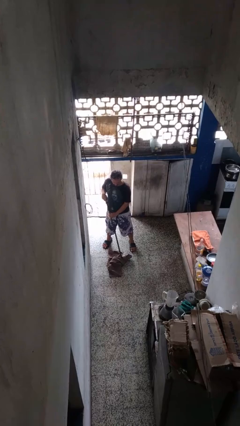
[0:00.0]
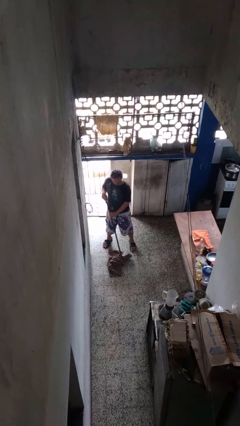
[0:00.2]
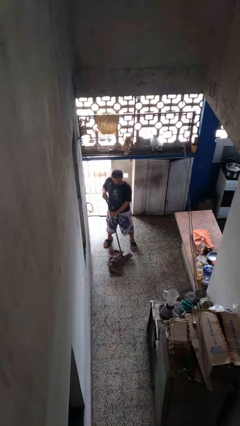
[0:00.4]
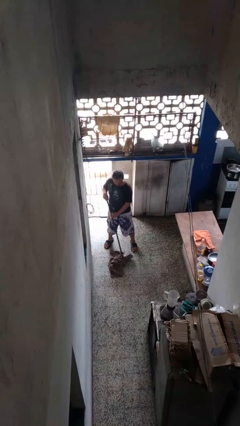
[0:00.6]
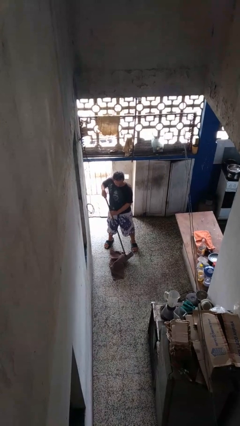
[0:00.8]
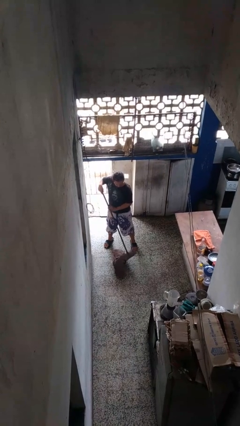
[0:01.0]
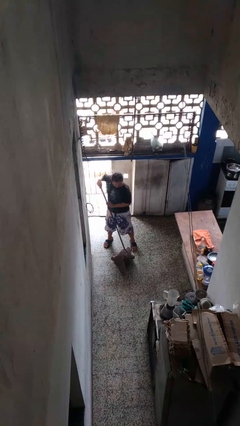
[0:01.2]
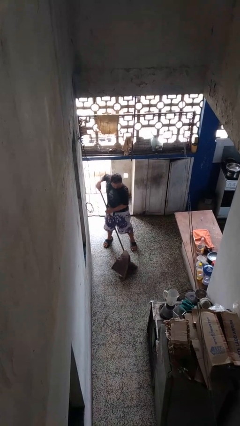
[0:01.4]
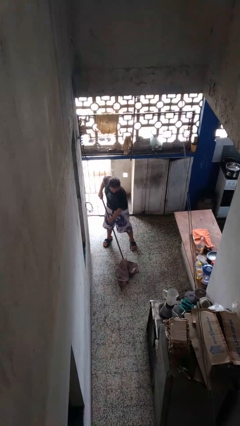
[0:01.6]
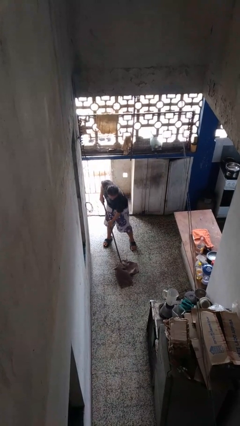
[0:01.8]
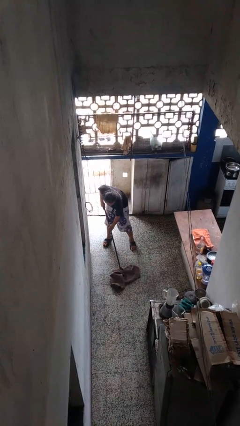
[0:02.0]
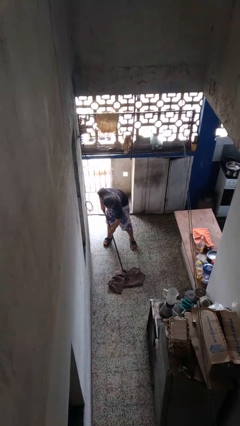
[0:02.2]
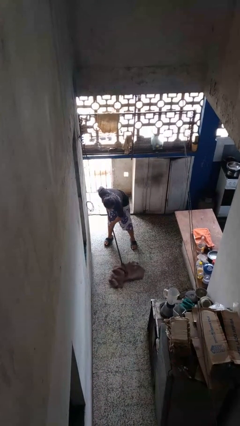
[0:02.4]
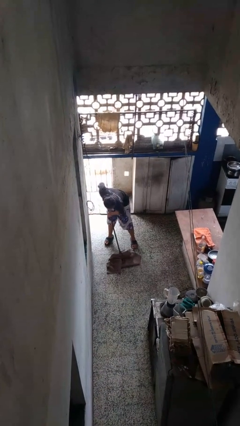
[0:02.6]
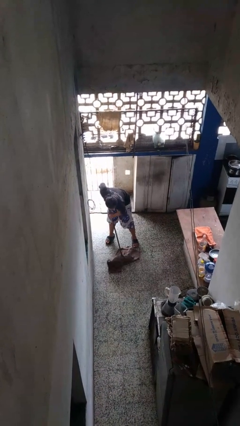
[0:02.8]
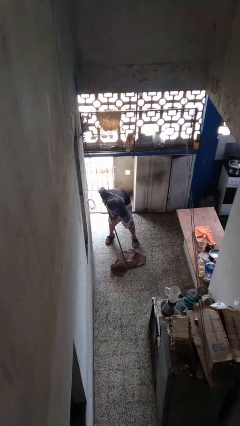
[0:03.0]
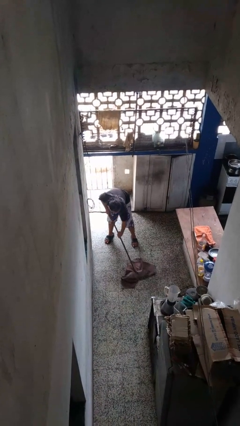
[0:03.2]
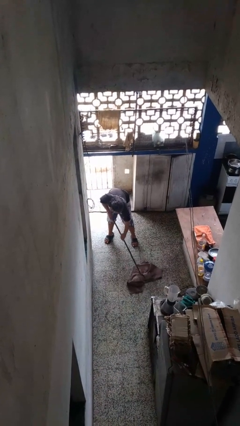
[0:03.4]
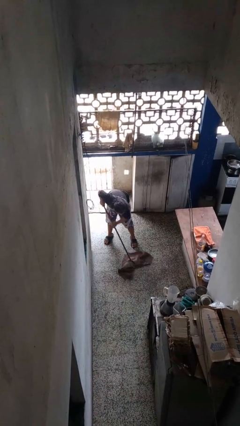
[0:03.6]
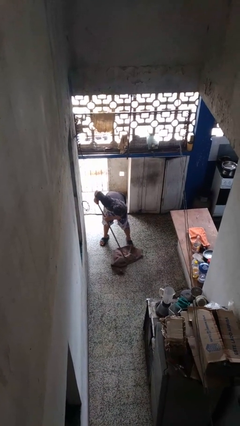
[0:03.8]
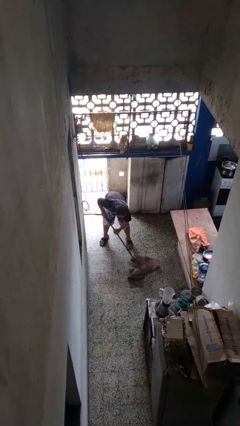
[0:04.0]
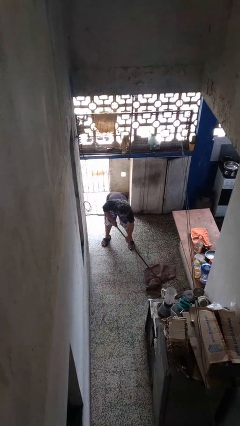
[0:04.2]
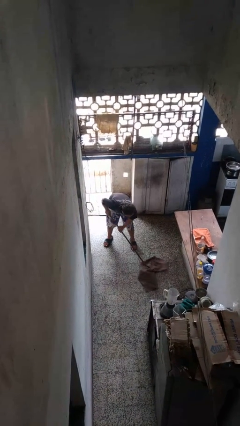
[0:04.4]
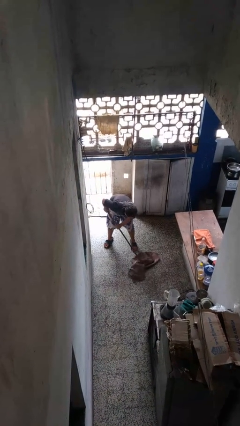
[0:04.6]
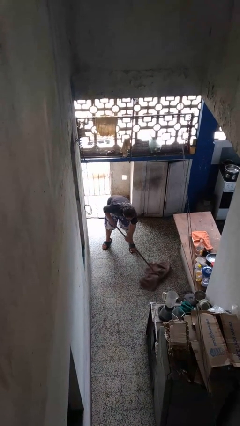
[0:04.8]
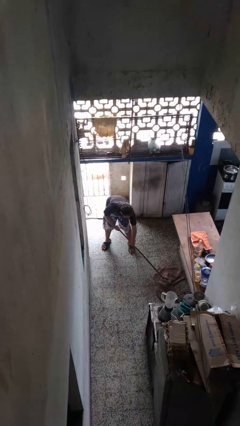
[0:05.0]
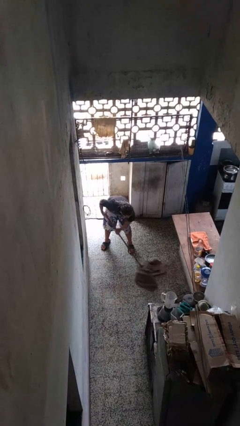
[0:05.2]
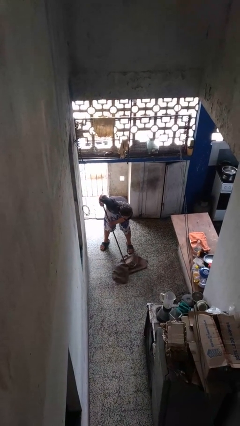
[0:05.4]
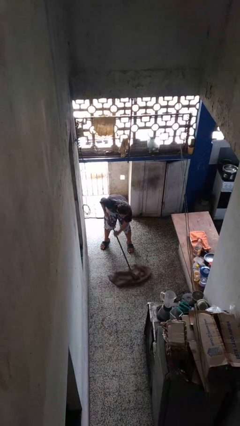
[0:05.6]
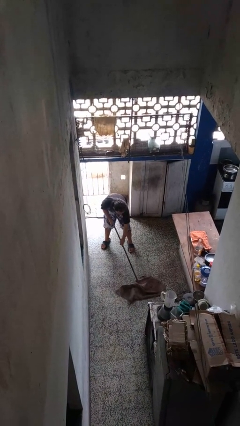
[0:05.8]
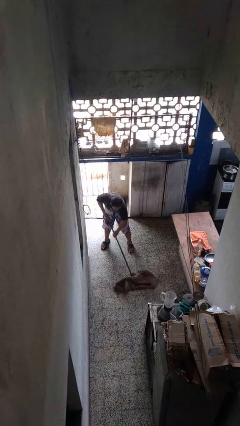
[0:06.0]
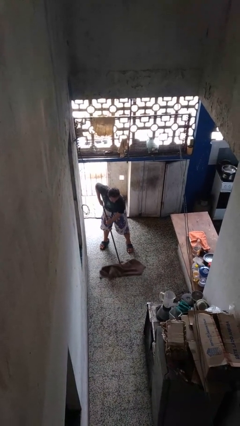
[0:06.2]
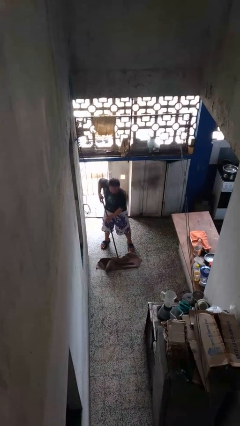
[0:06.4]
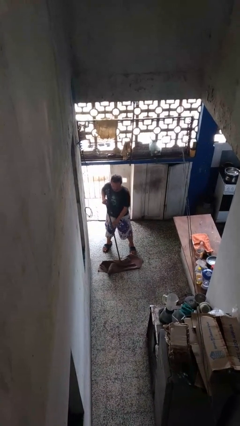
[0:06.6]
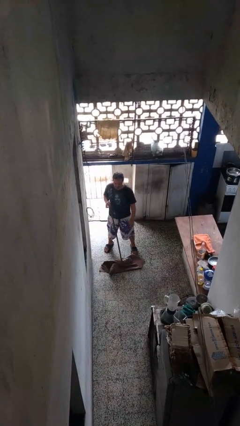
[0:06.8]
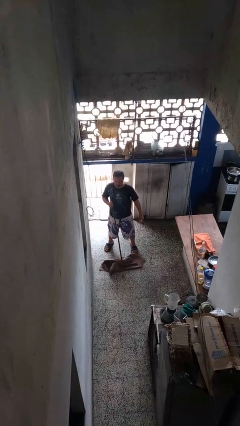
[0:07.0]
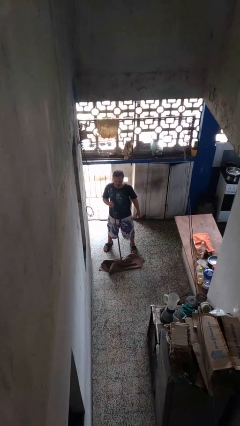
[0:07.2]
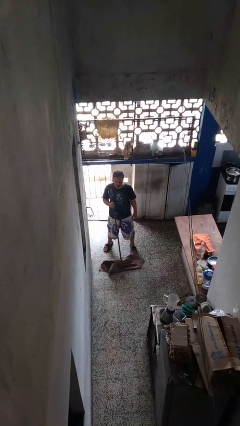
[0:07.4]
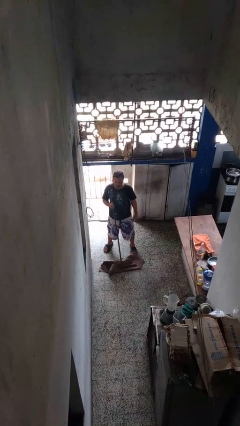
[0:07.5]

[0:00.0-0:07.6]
person mops

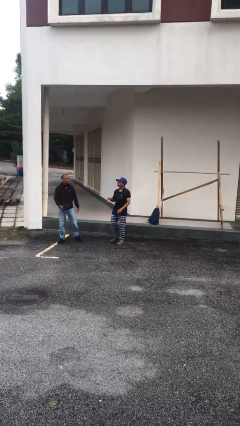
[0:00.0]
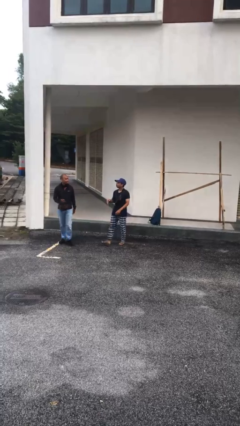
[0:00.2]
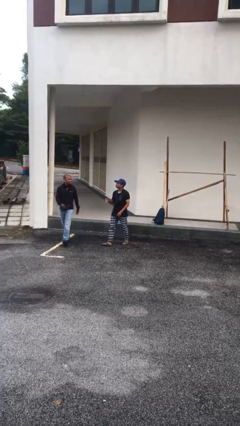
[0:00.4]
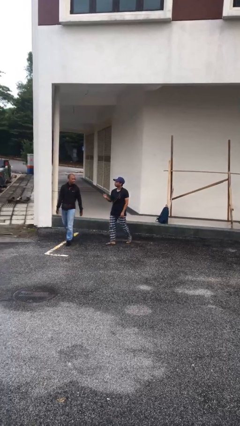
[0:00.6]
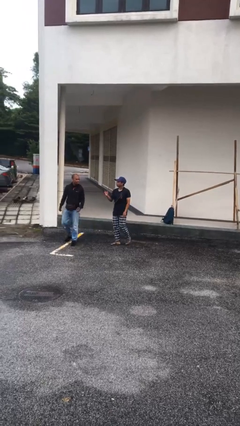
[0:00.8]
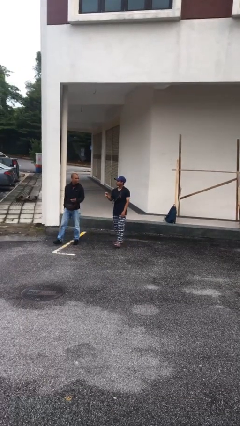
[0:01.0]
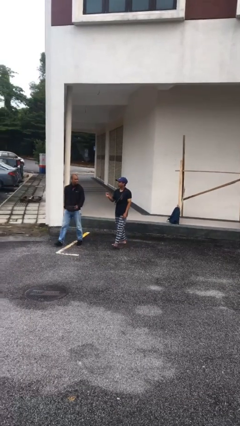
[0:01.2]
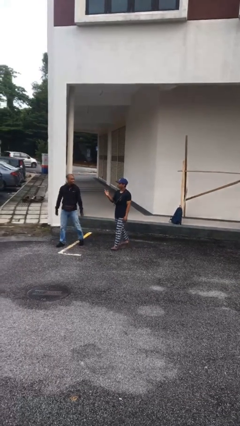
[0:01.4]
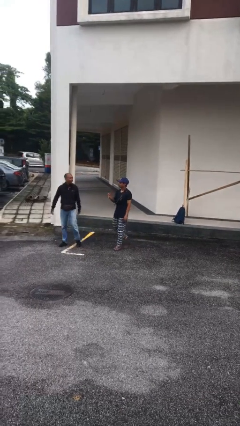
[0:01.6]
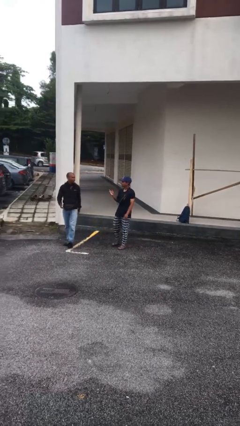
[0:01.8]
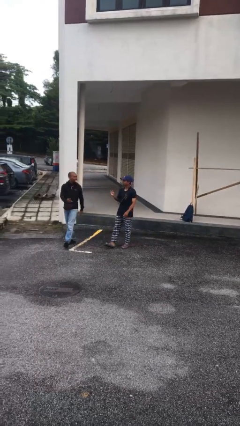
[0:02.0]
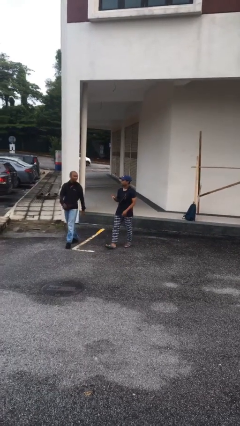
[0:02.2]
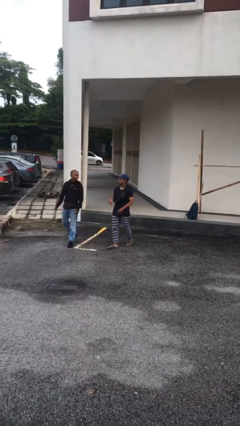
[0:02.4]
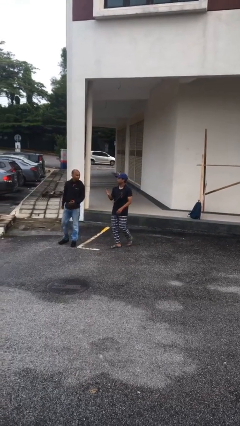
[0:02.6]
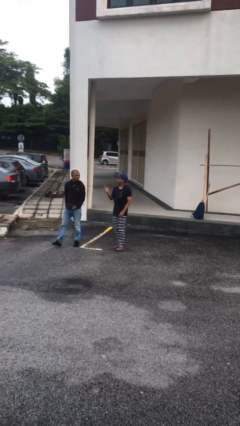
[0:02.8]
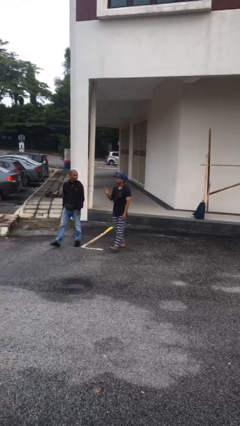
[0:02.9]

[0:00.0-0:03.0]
person talks to person

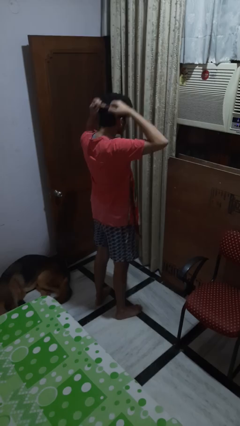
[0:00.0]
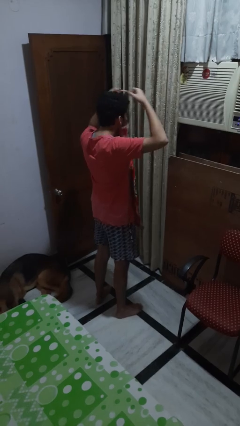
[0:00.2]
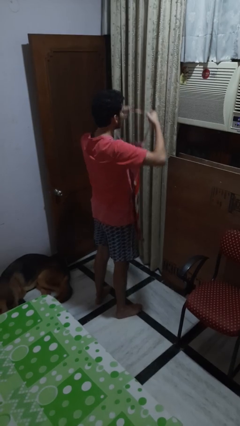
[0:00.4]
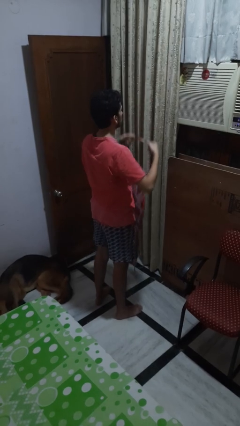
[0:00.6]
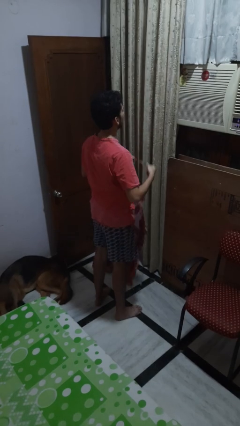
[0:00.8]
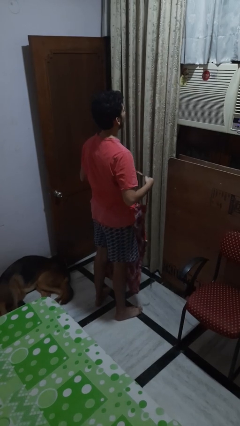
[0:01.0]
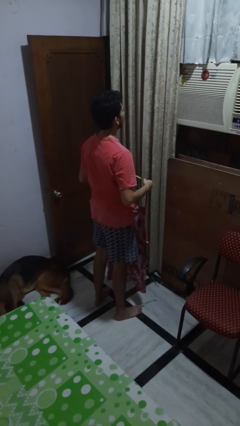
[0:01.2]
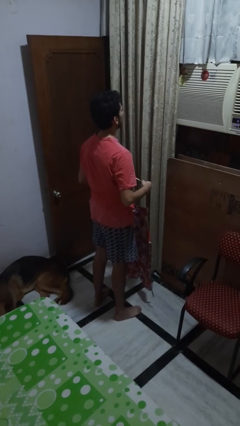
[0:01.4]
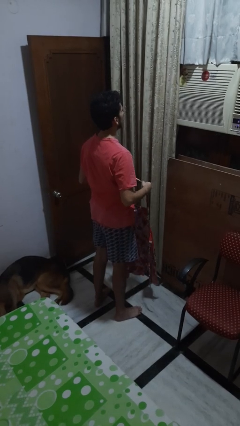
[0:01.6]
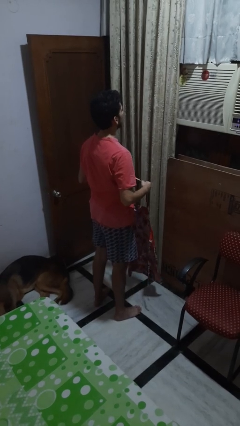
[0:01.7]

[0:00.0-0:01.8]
person takes off apron

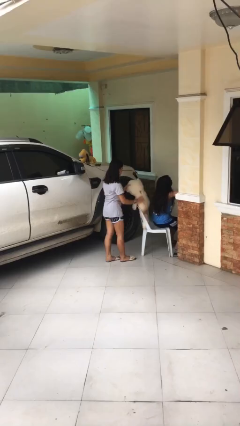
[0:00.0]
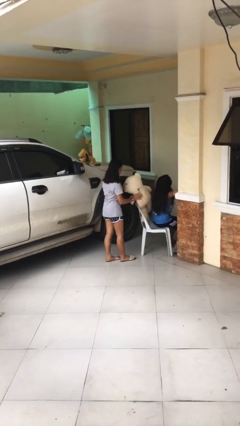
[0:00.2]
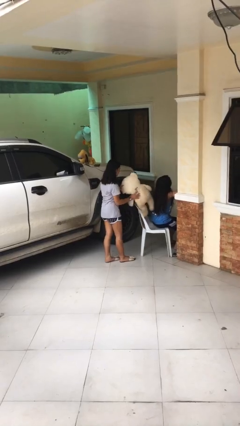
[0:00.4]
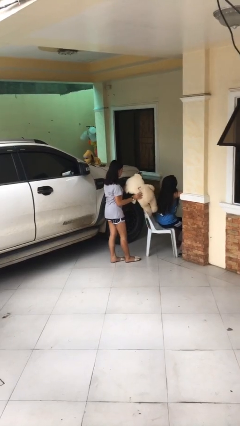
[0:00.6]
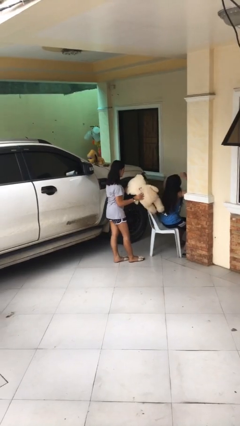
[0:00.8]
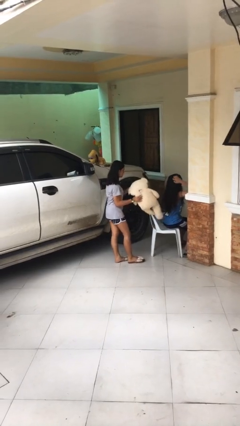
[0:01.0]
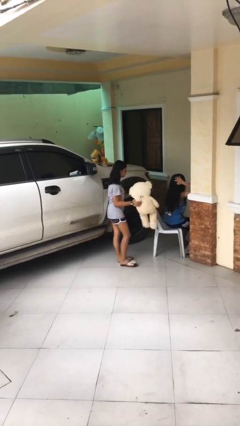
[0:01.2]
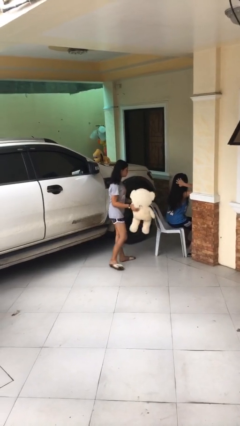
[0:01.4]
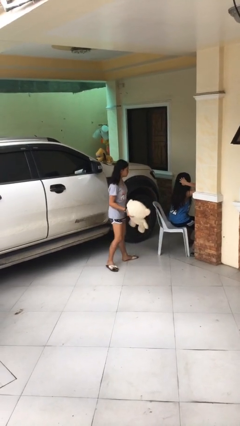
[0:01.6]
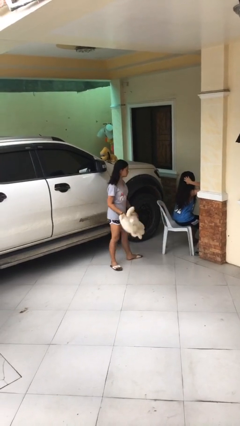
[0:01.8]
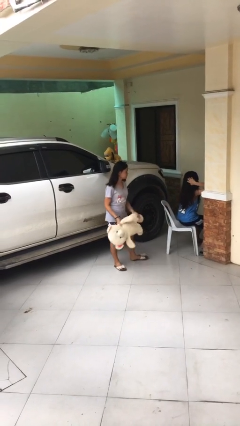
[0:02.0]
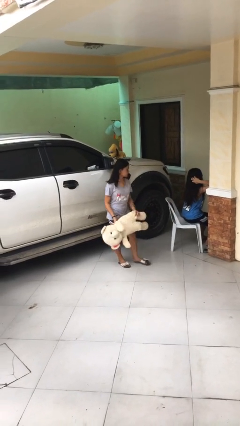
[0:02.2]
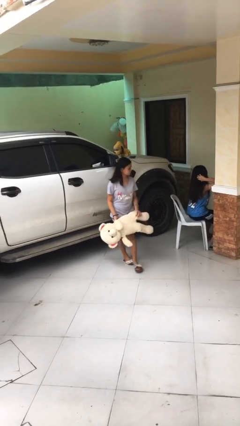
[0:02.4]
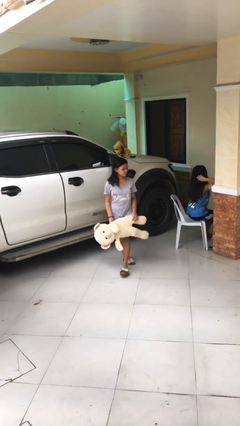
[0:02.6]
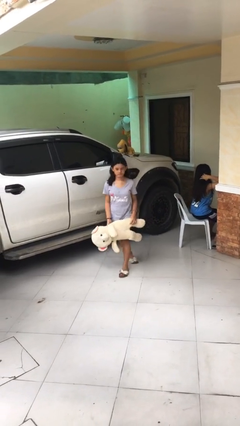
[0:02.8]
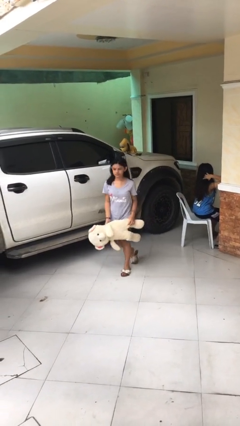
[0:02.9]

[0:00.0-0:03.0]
person steals object from person

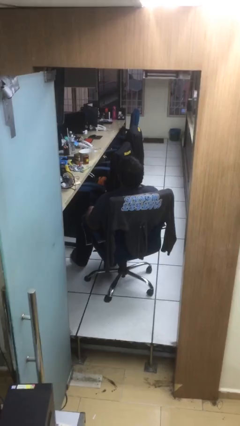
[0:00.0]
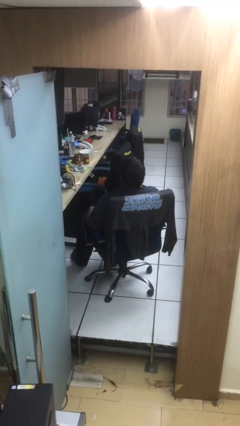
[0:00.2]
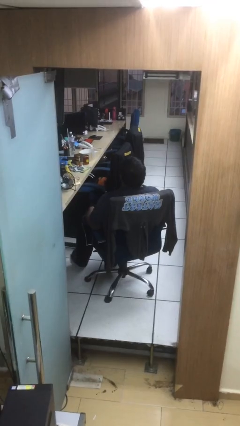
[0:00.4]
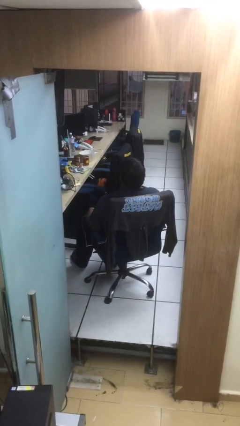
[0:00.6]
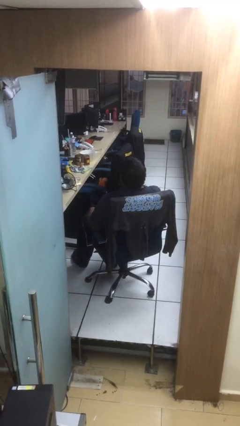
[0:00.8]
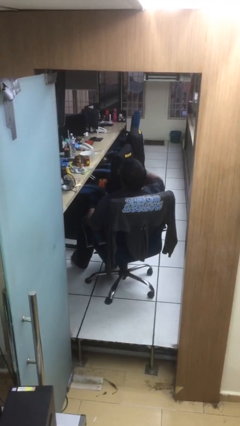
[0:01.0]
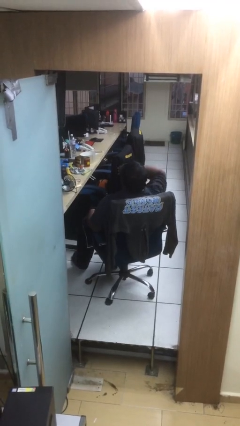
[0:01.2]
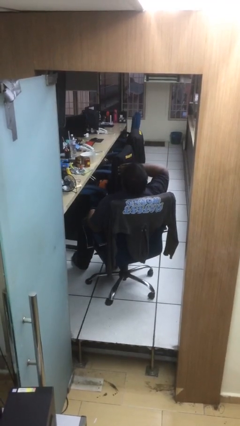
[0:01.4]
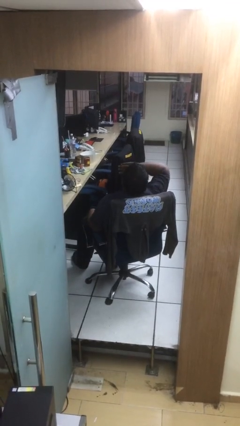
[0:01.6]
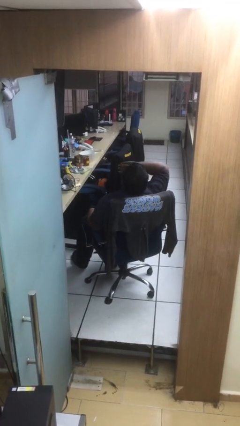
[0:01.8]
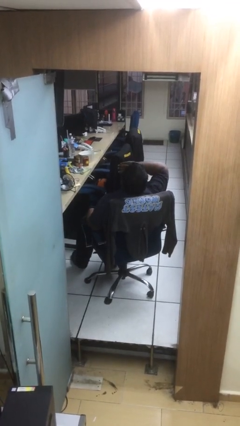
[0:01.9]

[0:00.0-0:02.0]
person yawns
